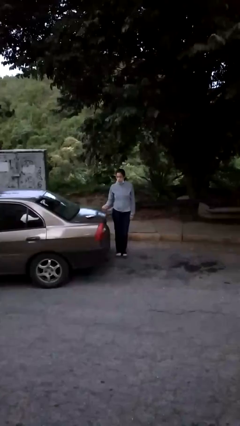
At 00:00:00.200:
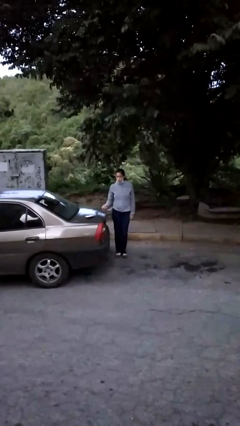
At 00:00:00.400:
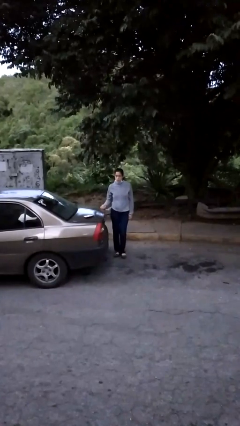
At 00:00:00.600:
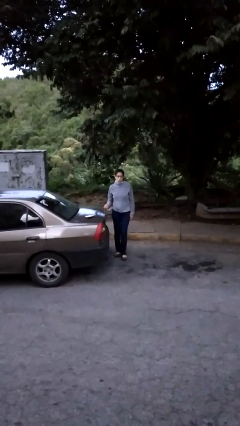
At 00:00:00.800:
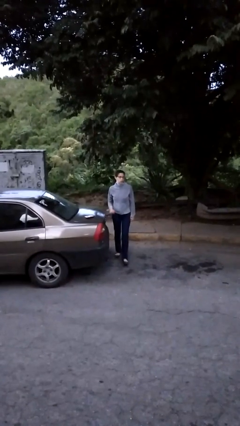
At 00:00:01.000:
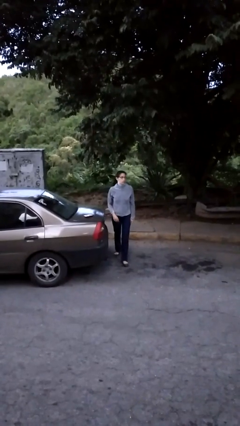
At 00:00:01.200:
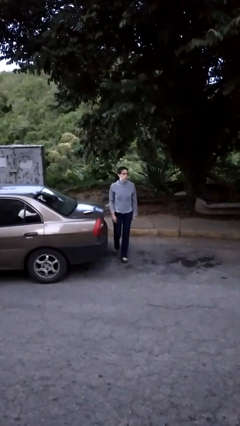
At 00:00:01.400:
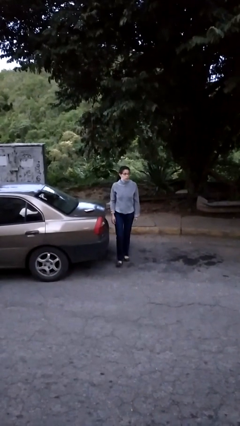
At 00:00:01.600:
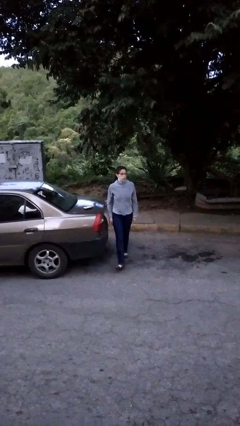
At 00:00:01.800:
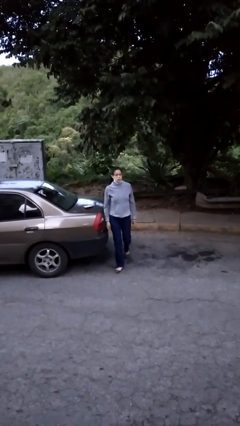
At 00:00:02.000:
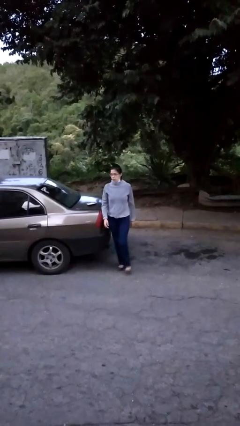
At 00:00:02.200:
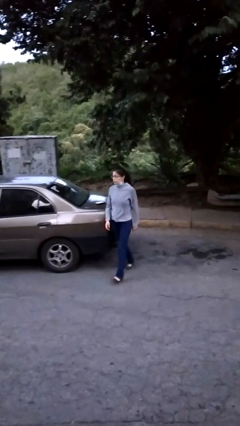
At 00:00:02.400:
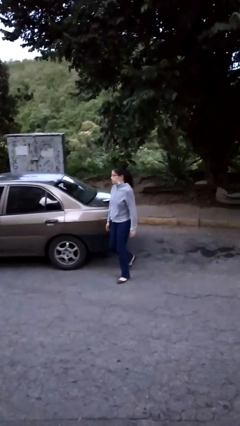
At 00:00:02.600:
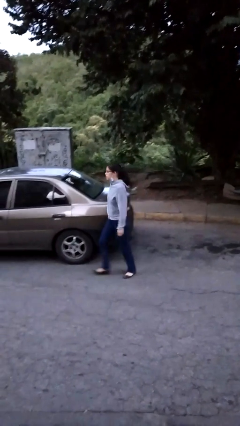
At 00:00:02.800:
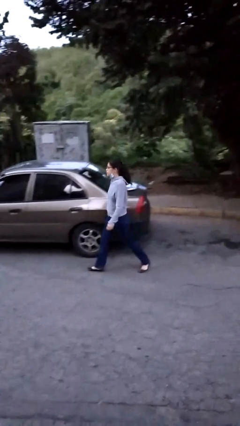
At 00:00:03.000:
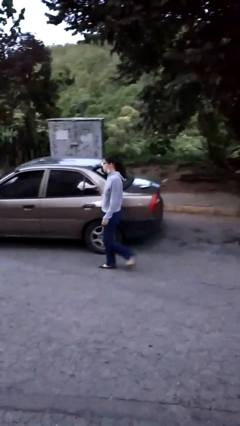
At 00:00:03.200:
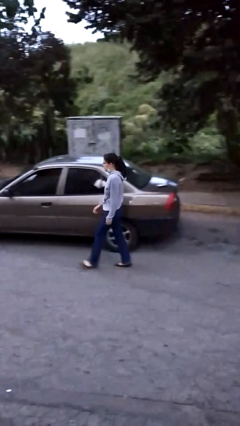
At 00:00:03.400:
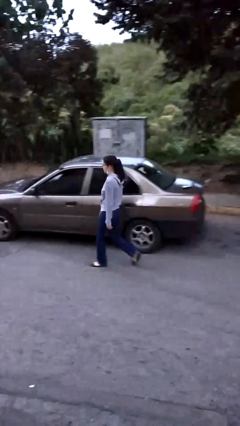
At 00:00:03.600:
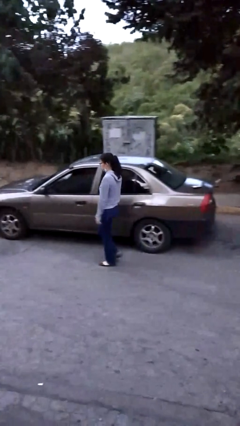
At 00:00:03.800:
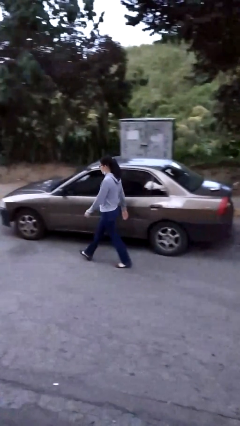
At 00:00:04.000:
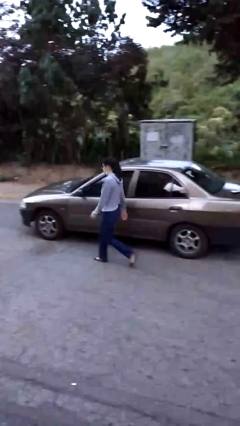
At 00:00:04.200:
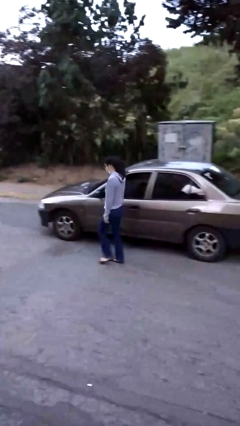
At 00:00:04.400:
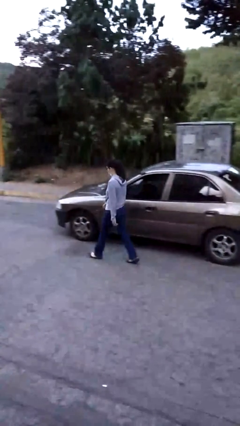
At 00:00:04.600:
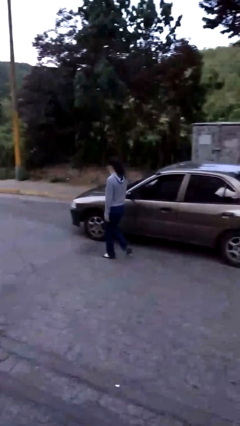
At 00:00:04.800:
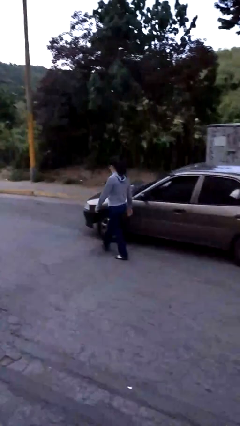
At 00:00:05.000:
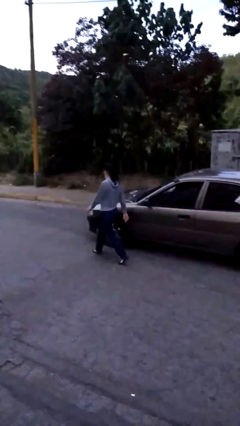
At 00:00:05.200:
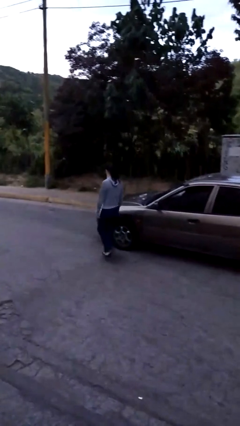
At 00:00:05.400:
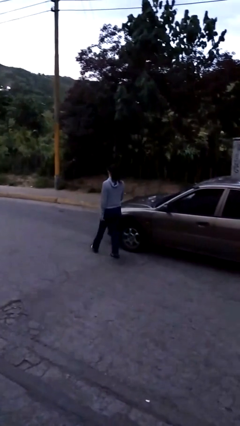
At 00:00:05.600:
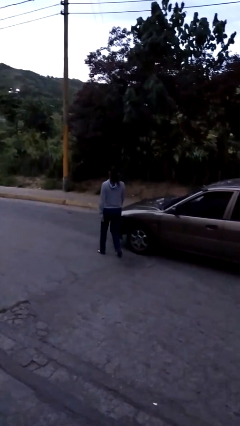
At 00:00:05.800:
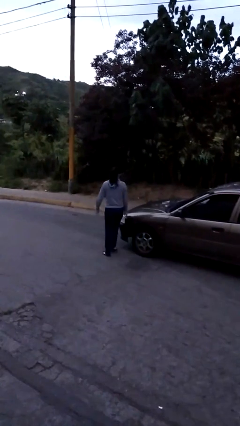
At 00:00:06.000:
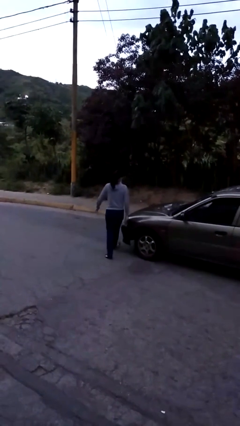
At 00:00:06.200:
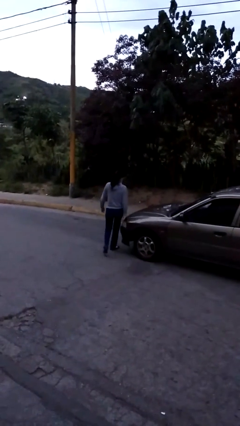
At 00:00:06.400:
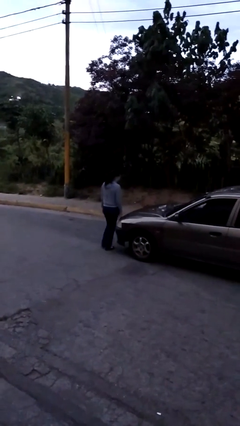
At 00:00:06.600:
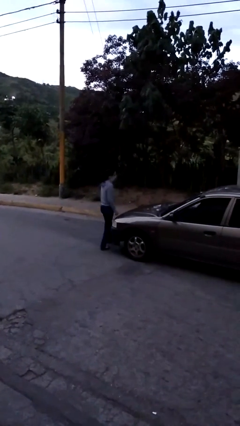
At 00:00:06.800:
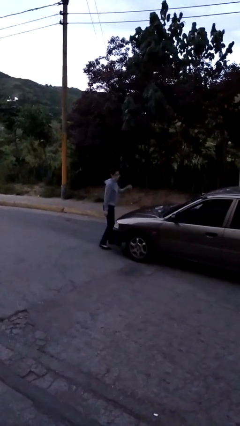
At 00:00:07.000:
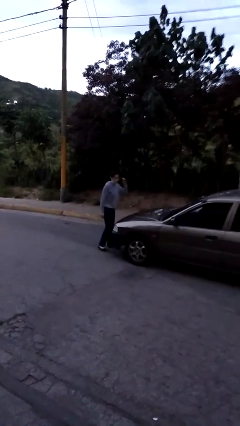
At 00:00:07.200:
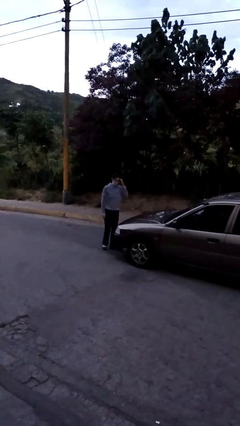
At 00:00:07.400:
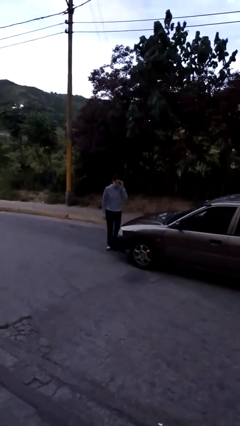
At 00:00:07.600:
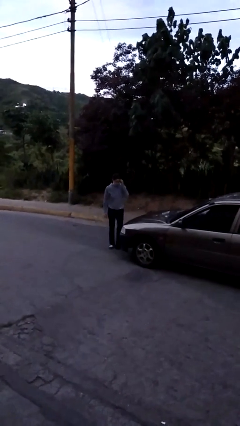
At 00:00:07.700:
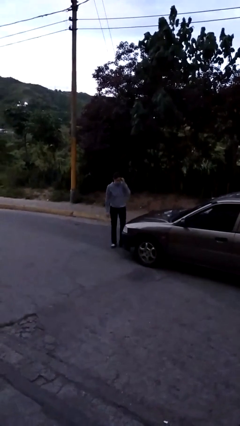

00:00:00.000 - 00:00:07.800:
person walks around car

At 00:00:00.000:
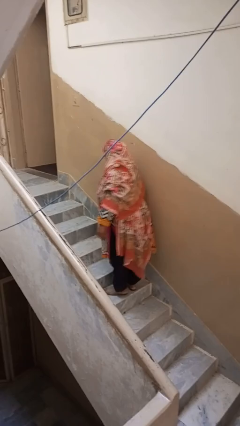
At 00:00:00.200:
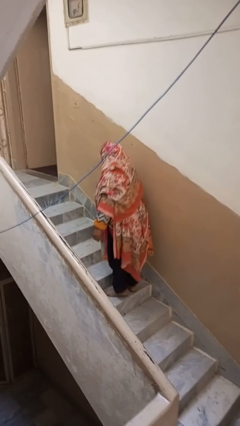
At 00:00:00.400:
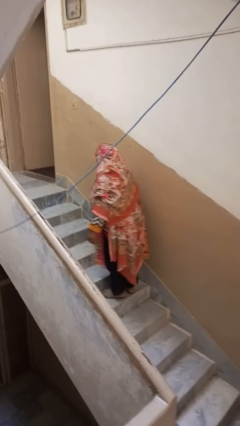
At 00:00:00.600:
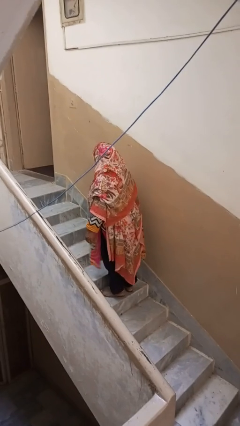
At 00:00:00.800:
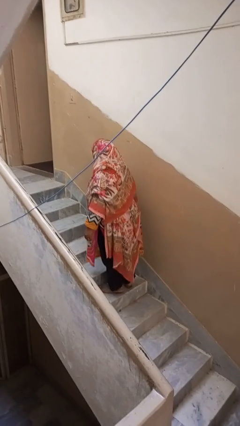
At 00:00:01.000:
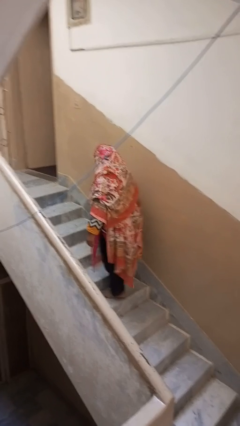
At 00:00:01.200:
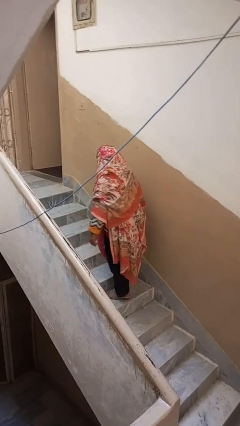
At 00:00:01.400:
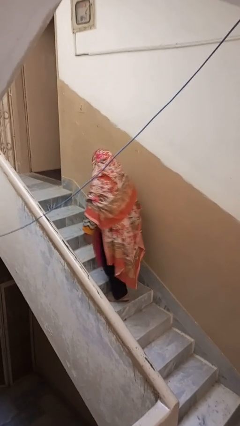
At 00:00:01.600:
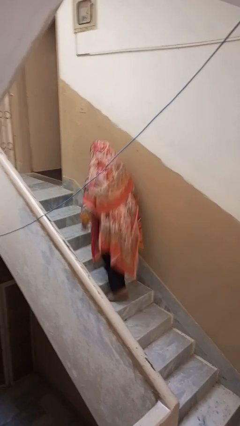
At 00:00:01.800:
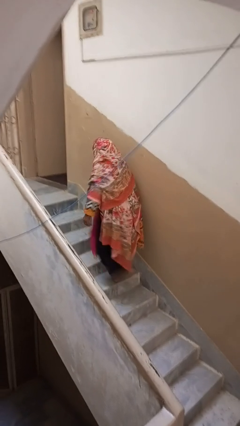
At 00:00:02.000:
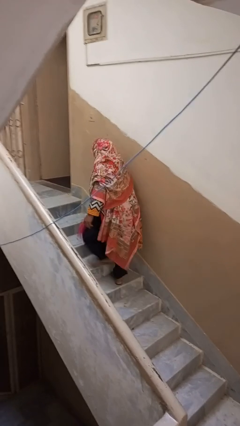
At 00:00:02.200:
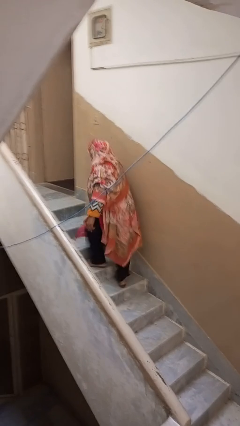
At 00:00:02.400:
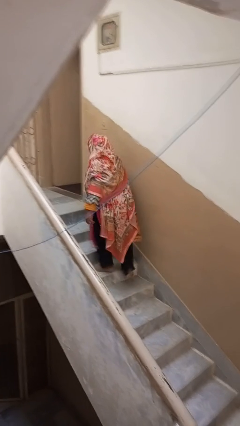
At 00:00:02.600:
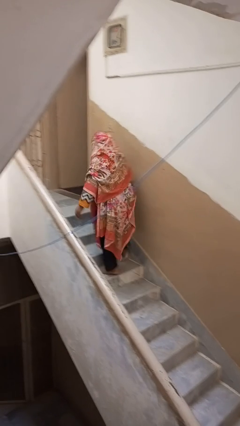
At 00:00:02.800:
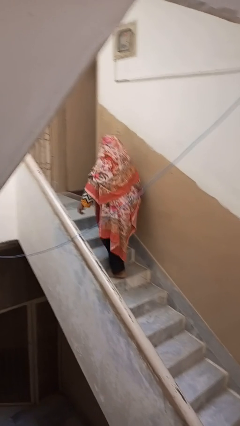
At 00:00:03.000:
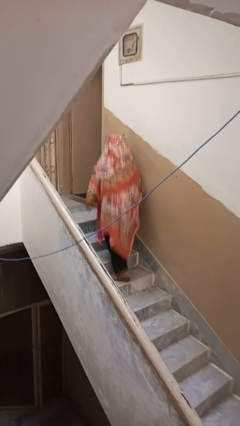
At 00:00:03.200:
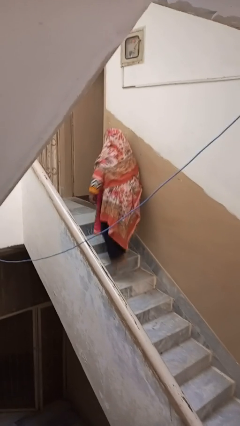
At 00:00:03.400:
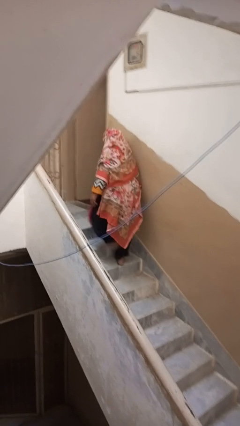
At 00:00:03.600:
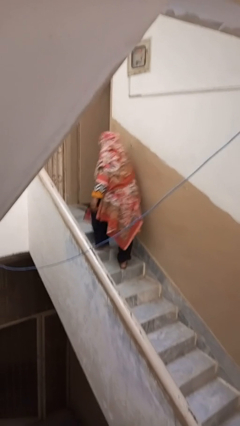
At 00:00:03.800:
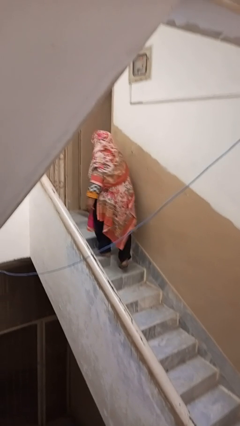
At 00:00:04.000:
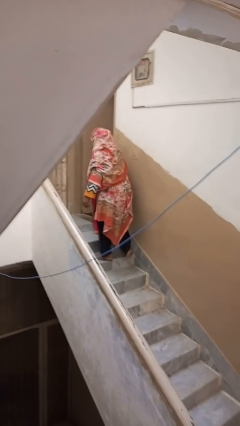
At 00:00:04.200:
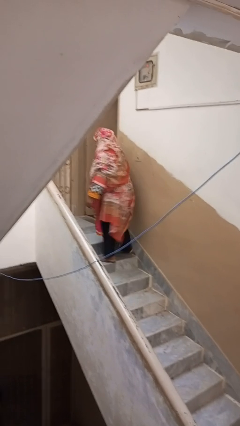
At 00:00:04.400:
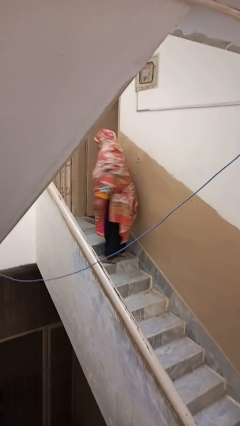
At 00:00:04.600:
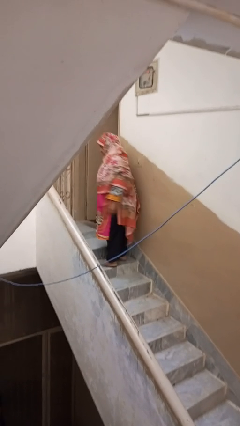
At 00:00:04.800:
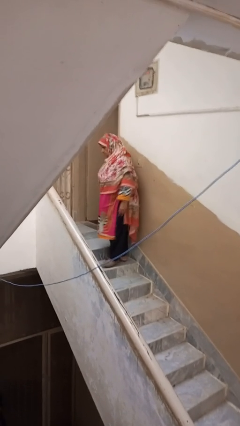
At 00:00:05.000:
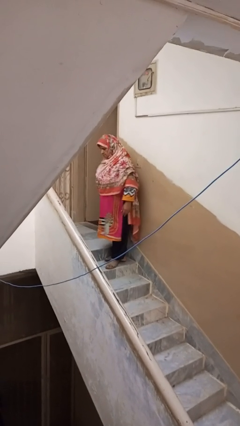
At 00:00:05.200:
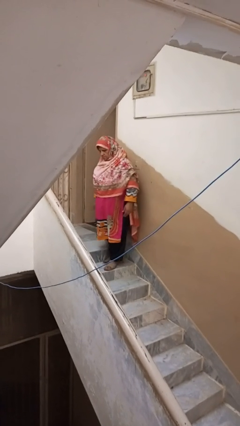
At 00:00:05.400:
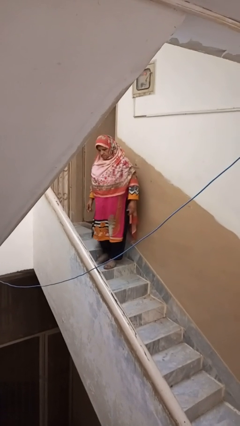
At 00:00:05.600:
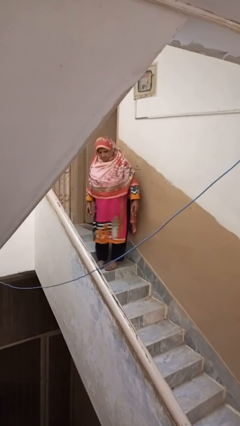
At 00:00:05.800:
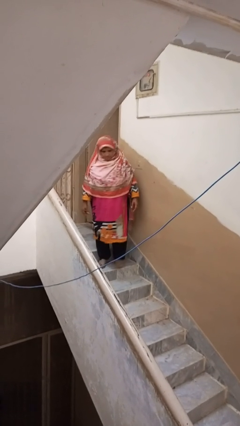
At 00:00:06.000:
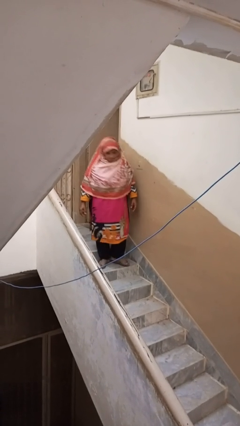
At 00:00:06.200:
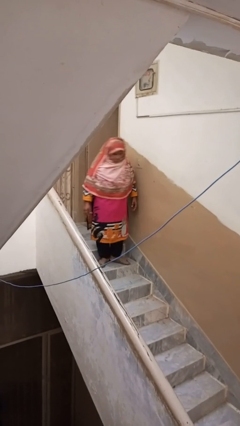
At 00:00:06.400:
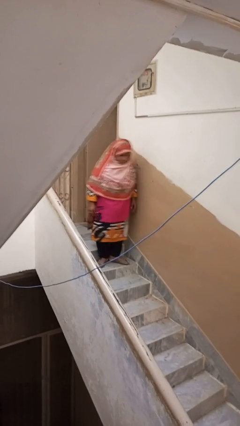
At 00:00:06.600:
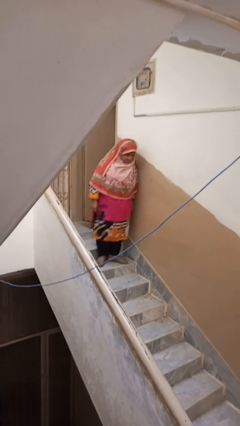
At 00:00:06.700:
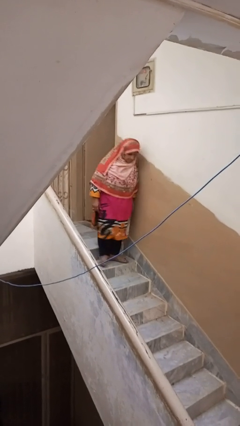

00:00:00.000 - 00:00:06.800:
person climbs up stairs

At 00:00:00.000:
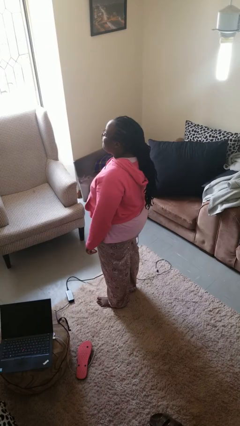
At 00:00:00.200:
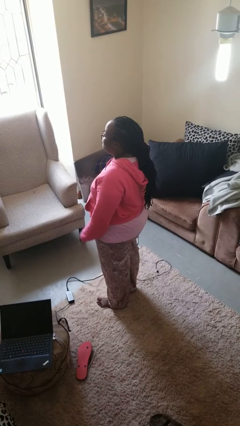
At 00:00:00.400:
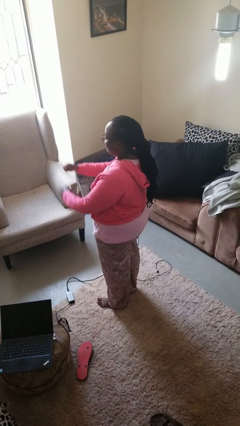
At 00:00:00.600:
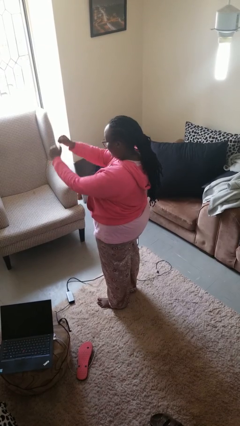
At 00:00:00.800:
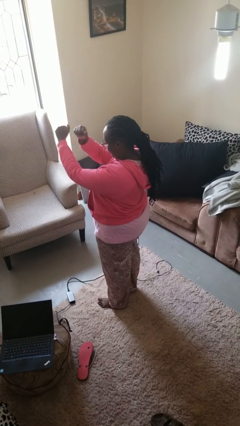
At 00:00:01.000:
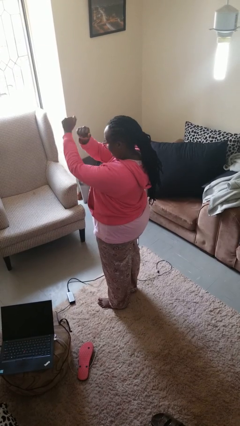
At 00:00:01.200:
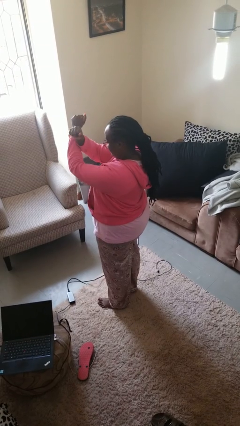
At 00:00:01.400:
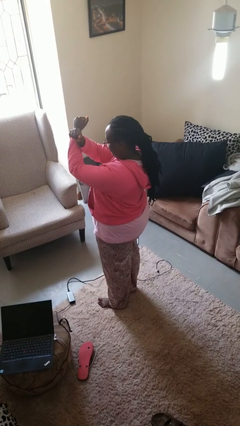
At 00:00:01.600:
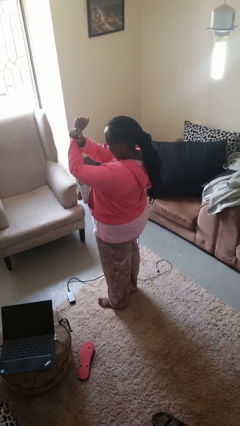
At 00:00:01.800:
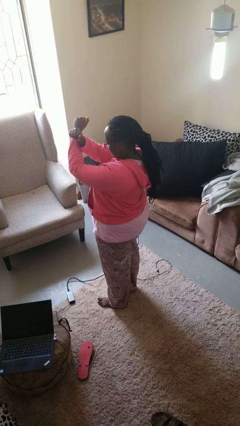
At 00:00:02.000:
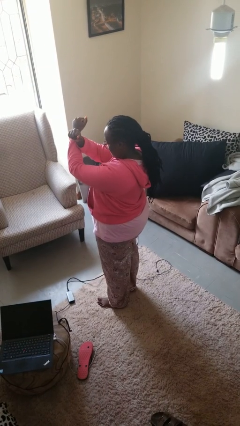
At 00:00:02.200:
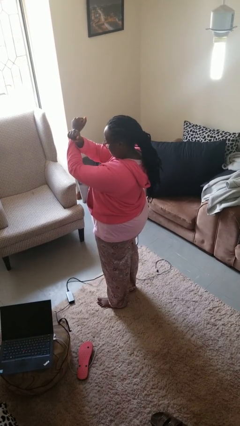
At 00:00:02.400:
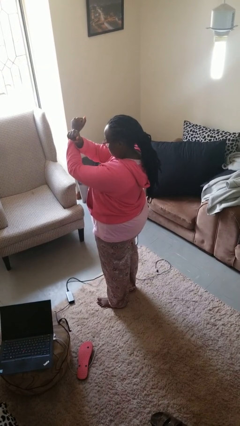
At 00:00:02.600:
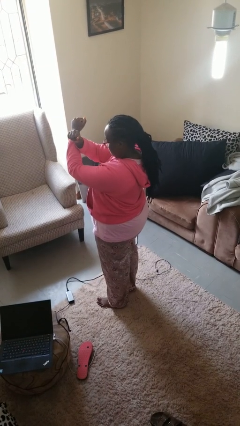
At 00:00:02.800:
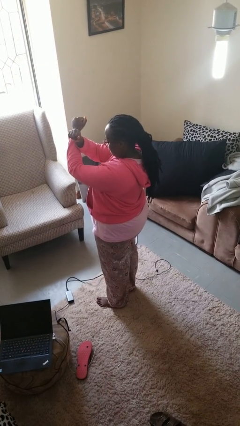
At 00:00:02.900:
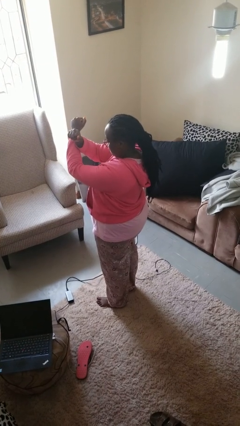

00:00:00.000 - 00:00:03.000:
person gestures arms x

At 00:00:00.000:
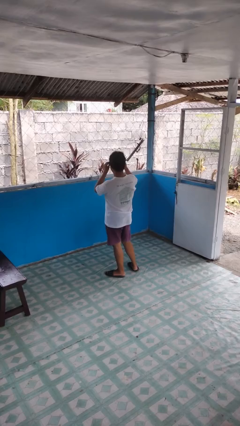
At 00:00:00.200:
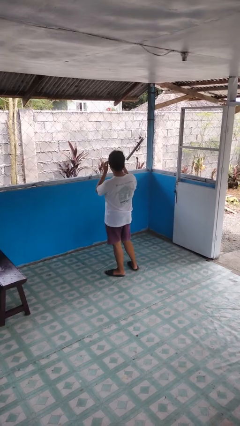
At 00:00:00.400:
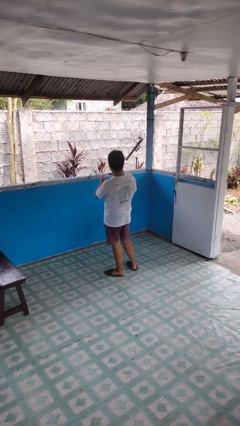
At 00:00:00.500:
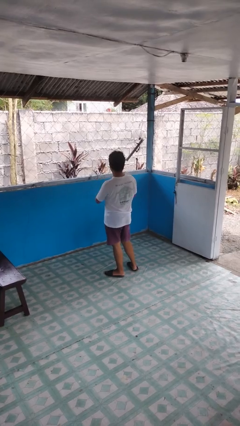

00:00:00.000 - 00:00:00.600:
person takes off sunglasses
